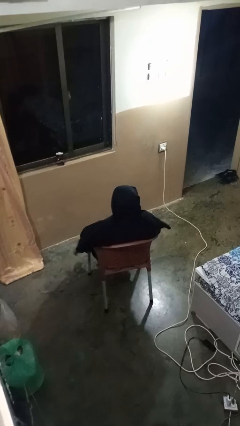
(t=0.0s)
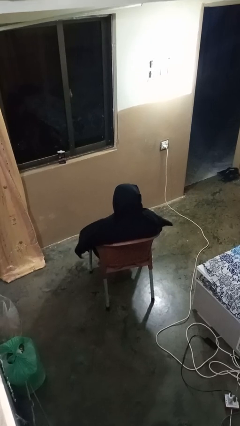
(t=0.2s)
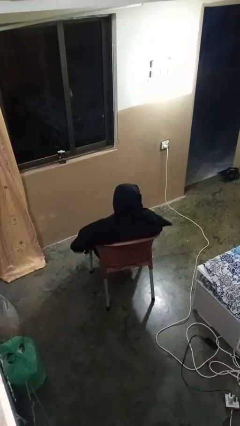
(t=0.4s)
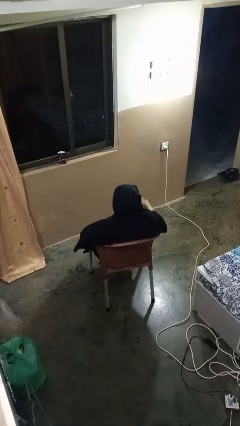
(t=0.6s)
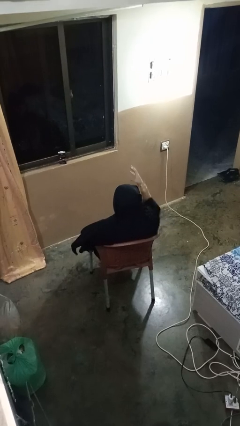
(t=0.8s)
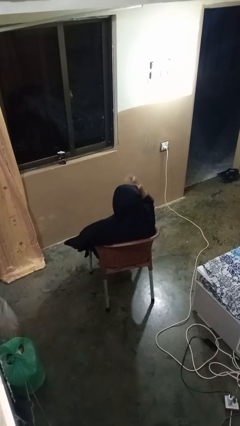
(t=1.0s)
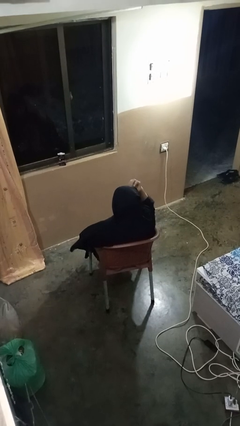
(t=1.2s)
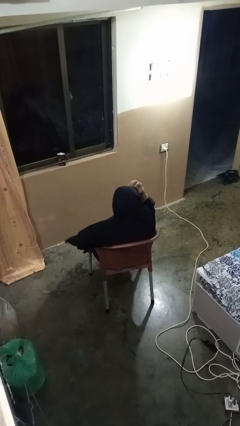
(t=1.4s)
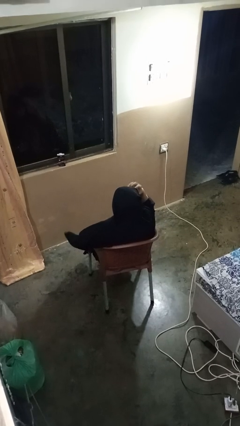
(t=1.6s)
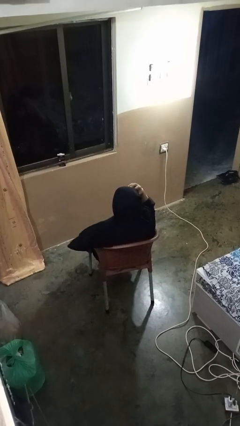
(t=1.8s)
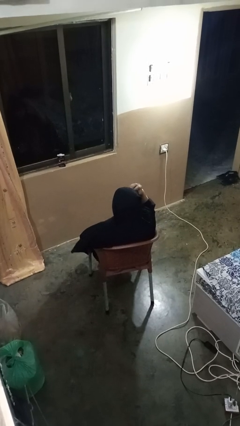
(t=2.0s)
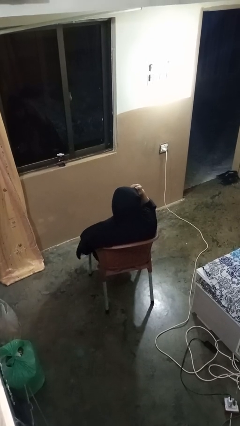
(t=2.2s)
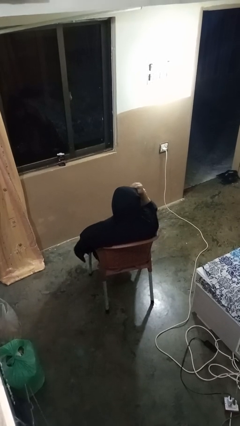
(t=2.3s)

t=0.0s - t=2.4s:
person scratches face

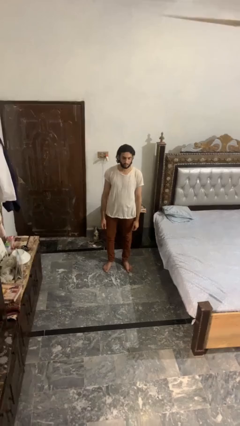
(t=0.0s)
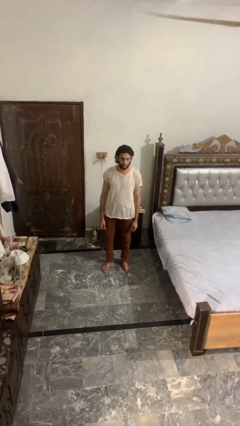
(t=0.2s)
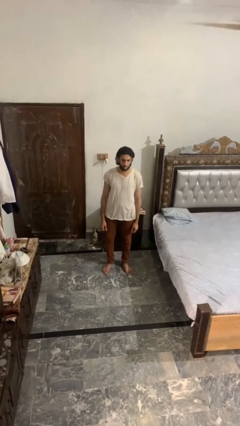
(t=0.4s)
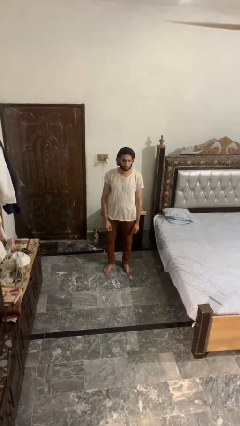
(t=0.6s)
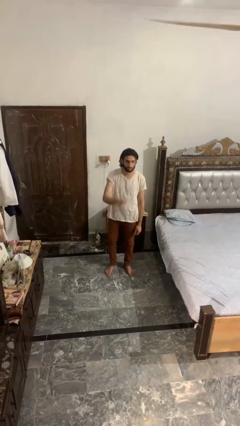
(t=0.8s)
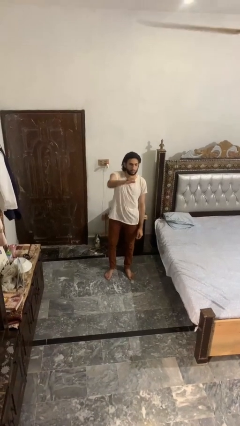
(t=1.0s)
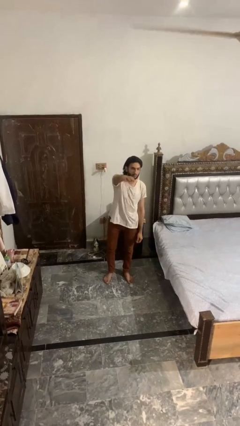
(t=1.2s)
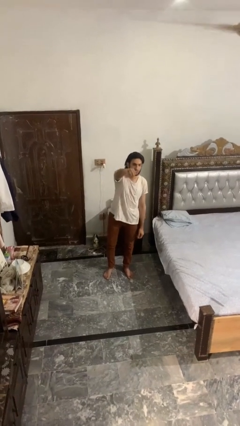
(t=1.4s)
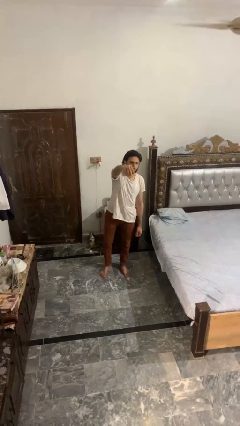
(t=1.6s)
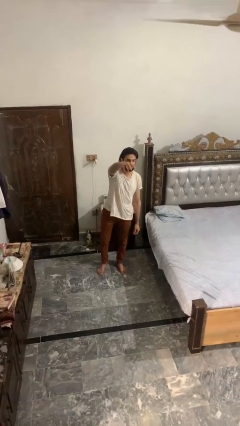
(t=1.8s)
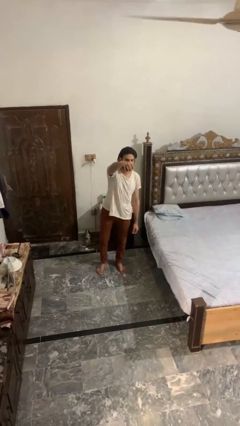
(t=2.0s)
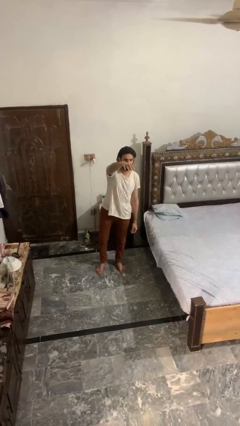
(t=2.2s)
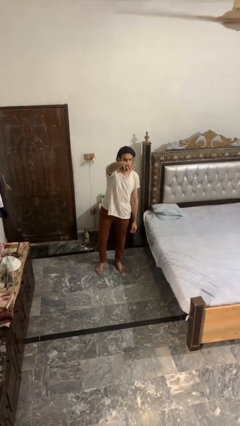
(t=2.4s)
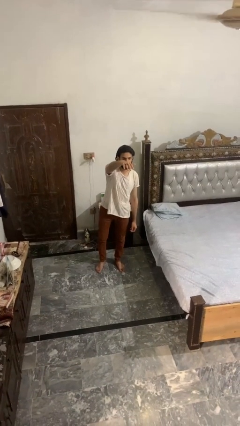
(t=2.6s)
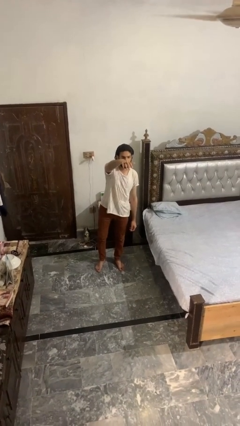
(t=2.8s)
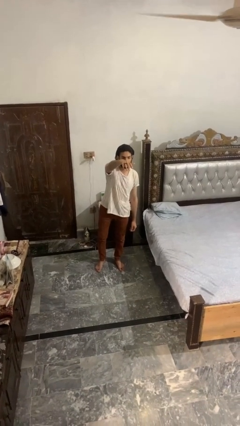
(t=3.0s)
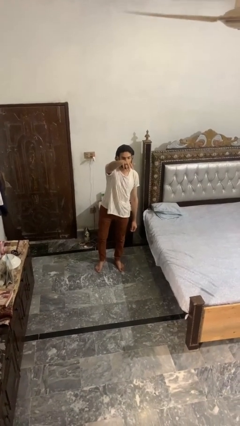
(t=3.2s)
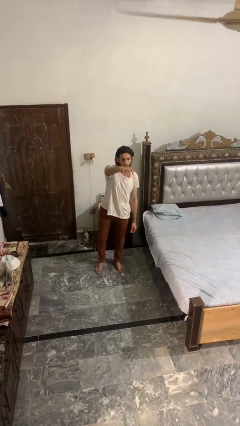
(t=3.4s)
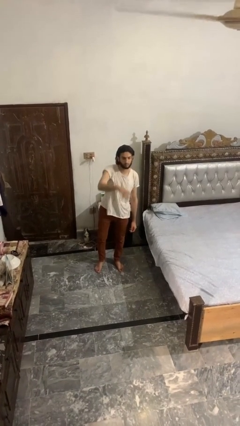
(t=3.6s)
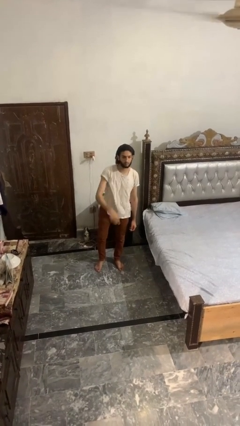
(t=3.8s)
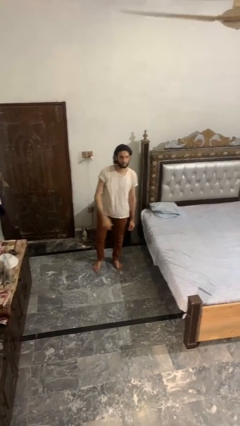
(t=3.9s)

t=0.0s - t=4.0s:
person gestures come here

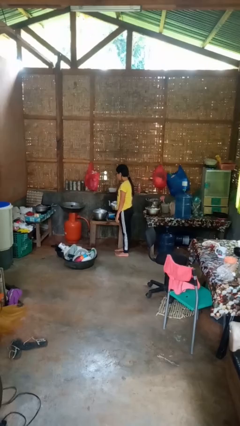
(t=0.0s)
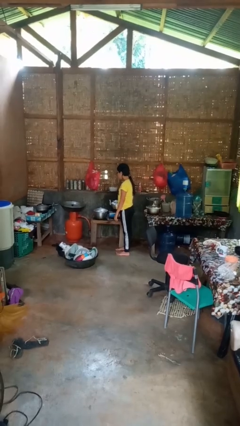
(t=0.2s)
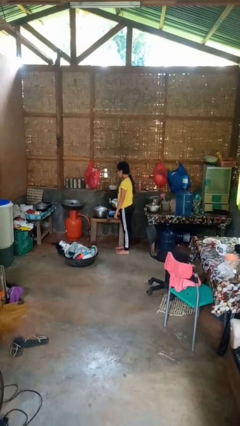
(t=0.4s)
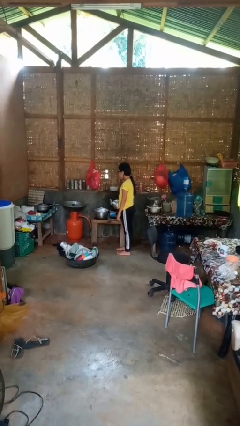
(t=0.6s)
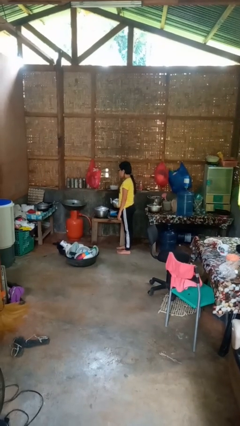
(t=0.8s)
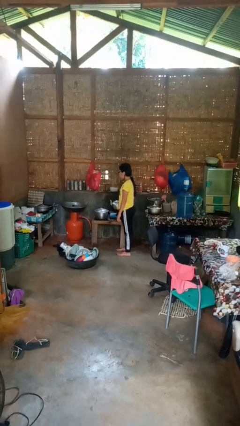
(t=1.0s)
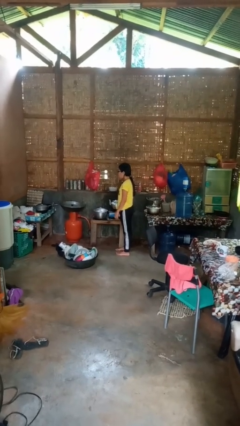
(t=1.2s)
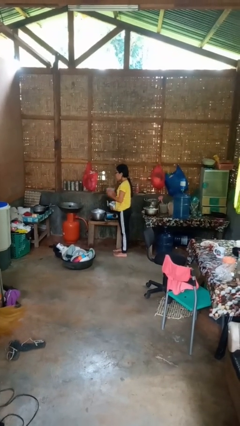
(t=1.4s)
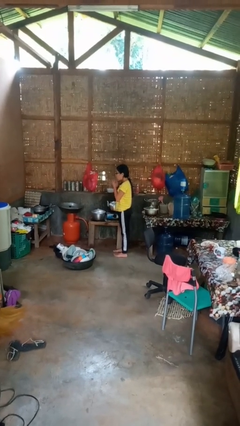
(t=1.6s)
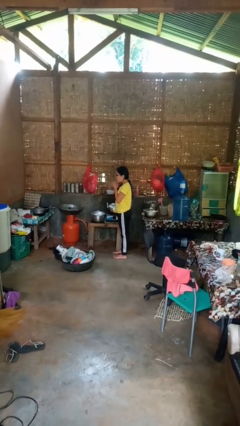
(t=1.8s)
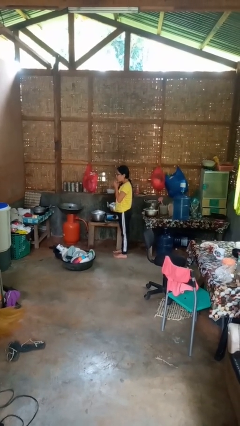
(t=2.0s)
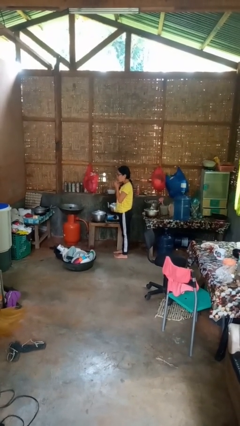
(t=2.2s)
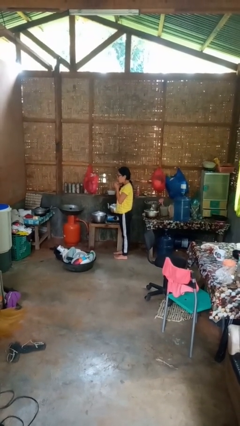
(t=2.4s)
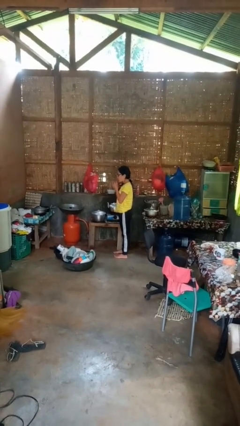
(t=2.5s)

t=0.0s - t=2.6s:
person burns hand

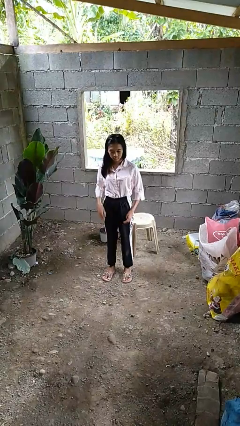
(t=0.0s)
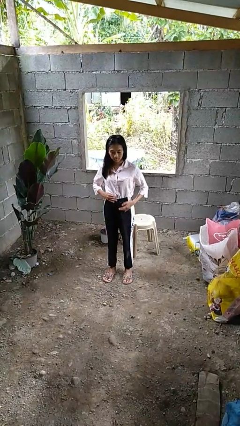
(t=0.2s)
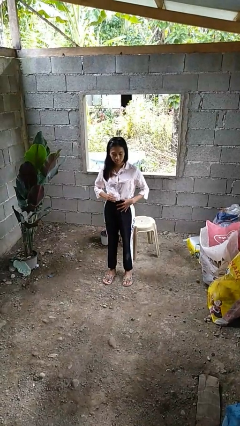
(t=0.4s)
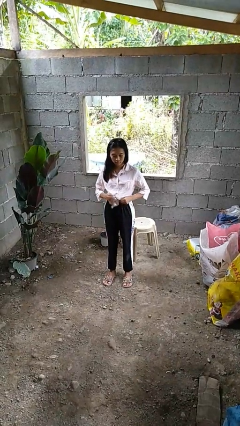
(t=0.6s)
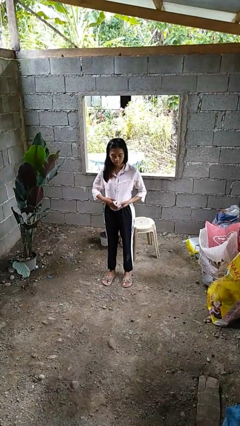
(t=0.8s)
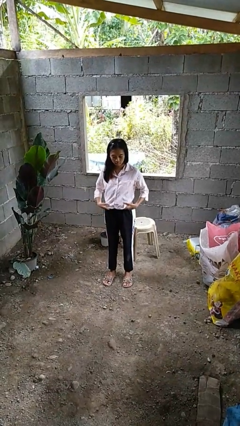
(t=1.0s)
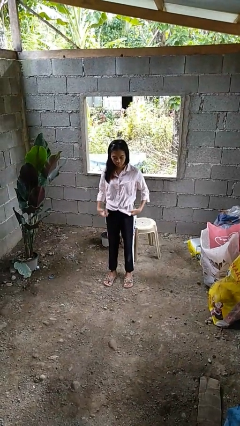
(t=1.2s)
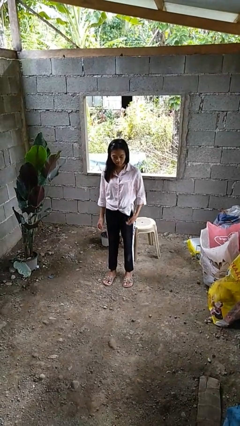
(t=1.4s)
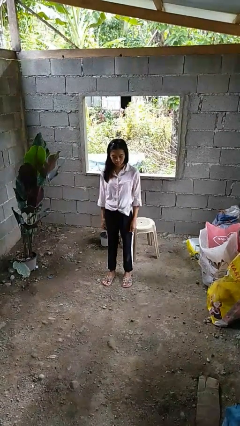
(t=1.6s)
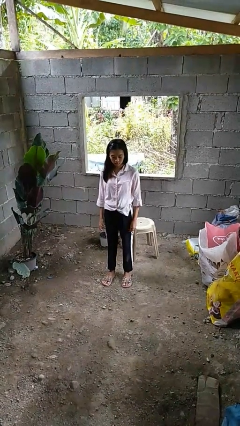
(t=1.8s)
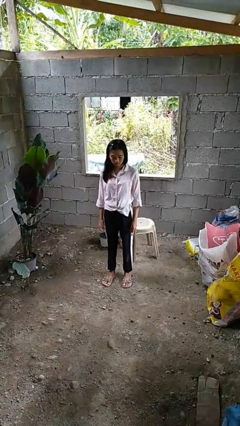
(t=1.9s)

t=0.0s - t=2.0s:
person untucks shirt

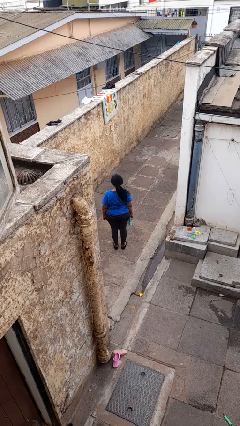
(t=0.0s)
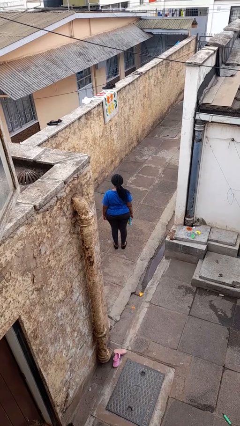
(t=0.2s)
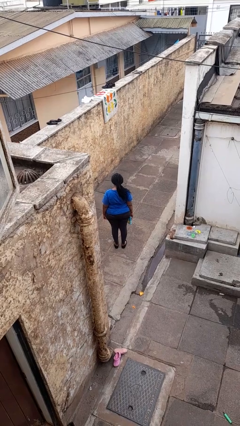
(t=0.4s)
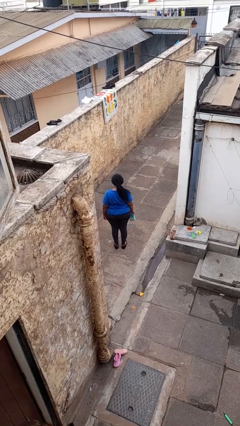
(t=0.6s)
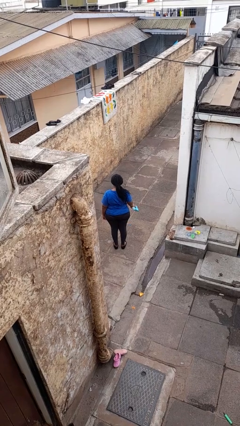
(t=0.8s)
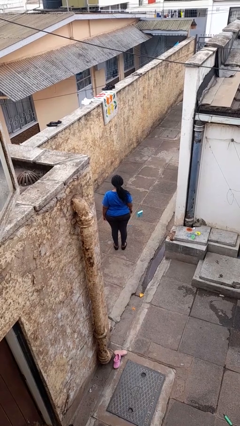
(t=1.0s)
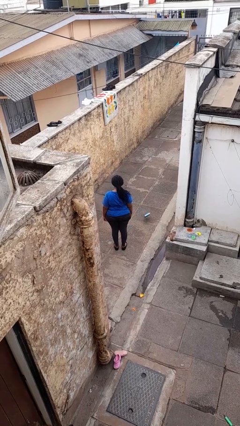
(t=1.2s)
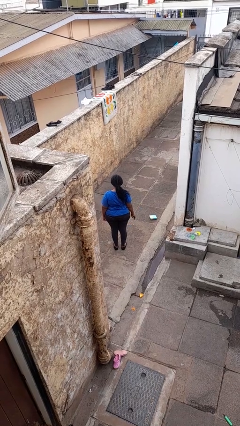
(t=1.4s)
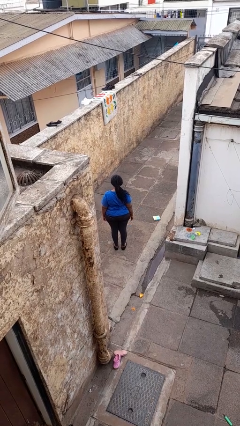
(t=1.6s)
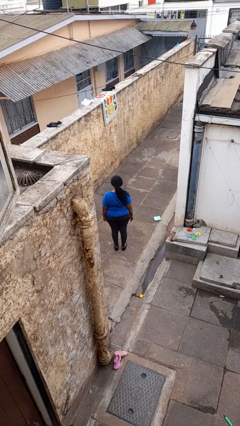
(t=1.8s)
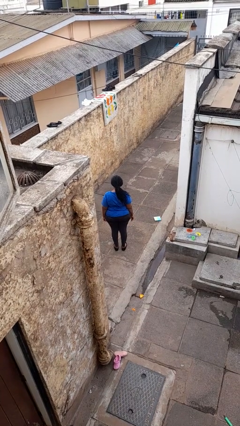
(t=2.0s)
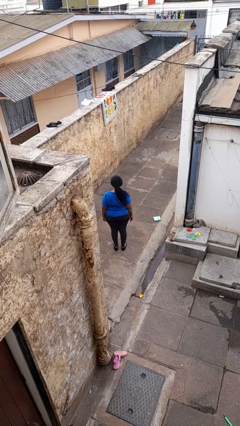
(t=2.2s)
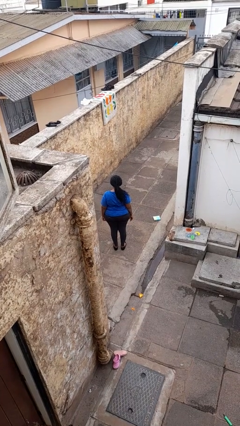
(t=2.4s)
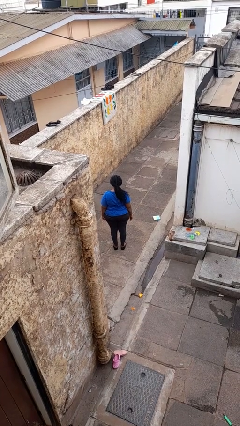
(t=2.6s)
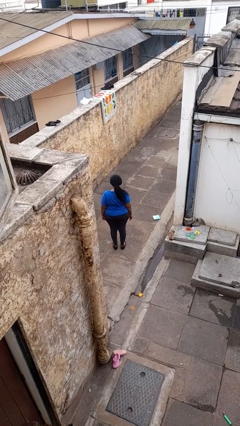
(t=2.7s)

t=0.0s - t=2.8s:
person throws object to ground

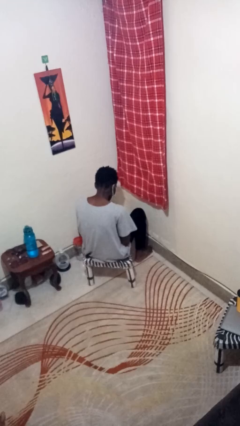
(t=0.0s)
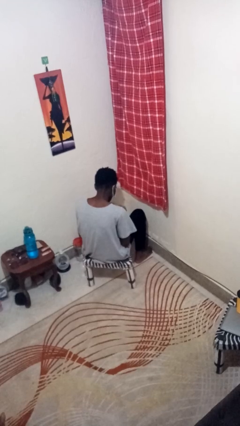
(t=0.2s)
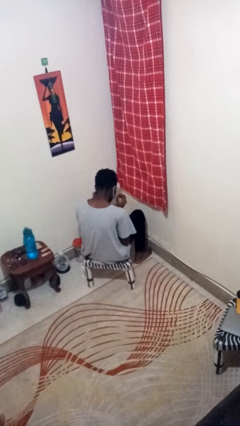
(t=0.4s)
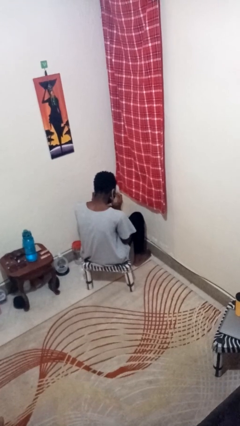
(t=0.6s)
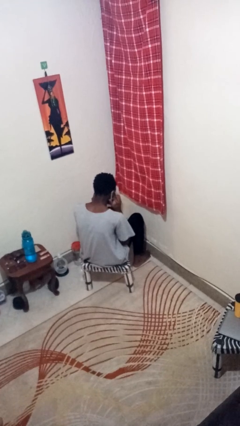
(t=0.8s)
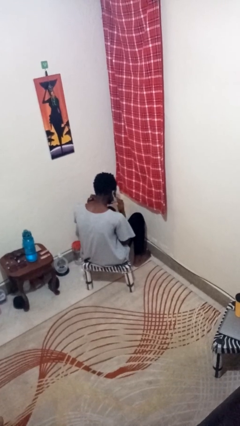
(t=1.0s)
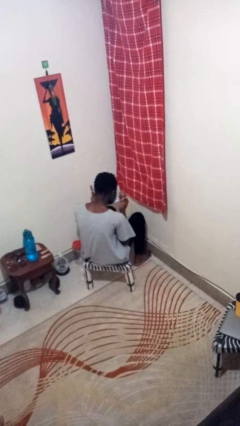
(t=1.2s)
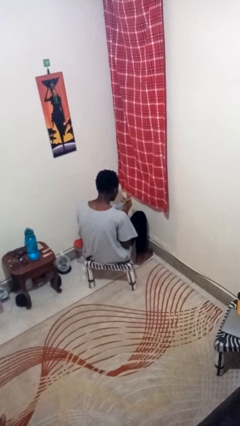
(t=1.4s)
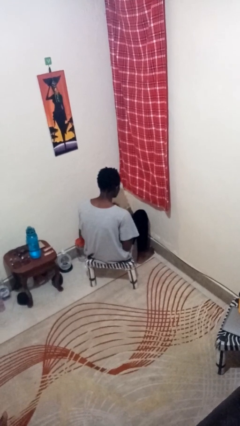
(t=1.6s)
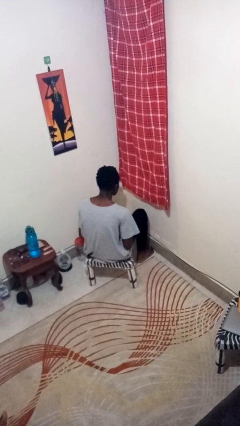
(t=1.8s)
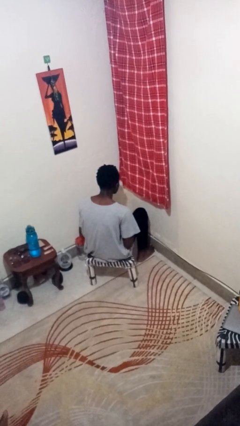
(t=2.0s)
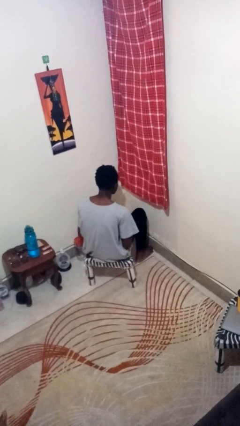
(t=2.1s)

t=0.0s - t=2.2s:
person takes off facemask

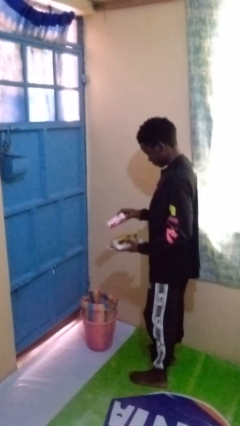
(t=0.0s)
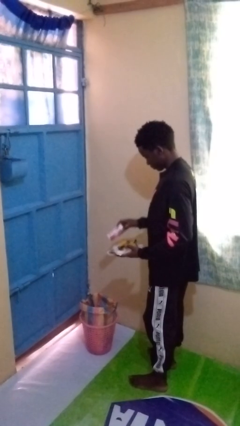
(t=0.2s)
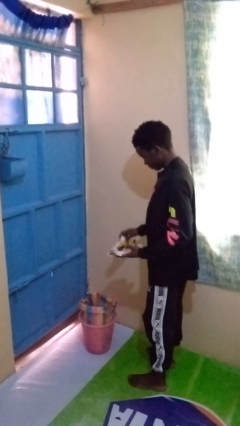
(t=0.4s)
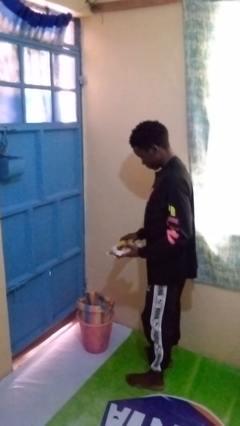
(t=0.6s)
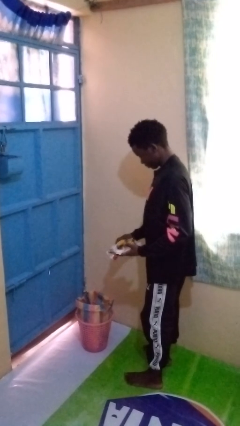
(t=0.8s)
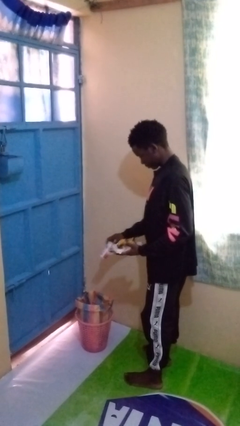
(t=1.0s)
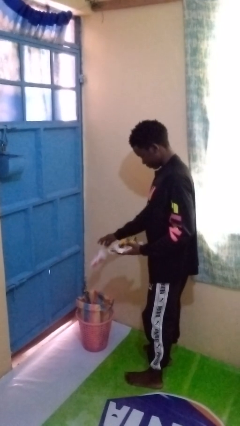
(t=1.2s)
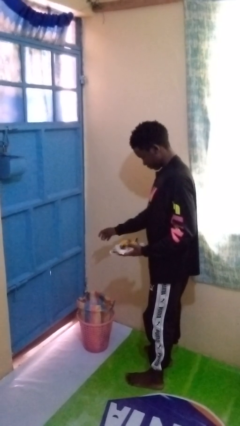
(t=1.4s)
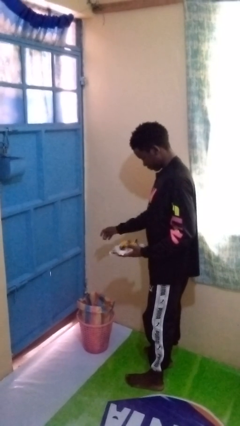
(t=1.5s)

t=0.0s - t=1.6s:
person discards trash
